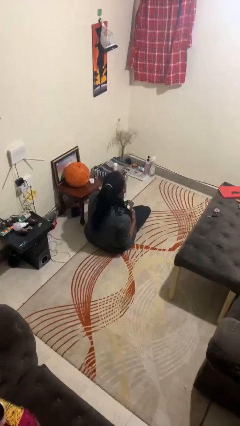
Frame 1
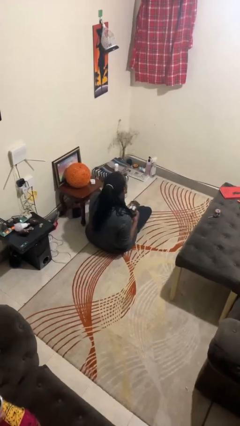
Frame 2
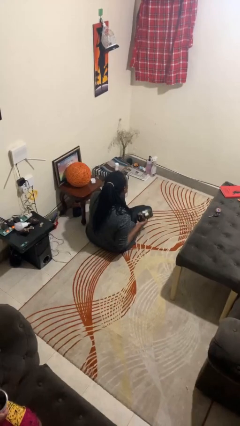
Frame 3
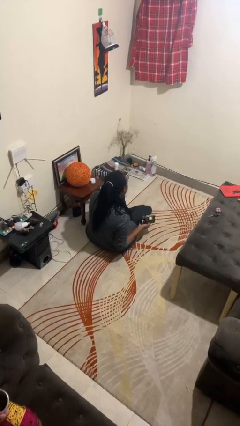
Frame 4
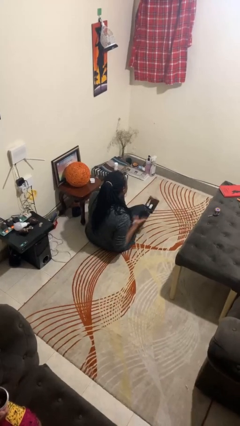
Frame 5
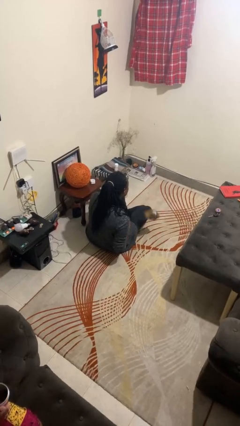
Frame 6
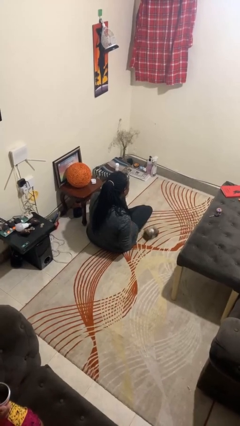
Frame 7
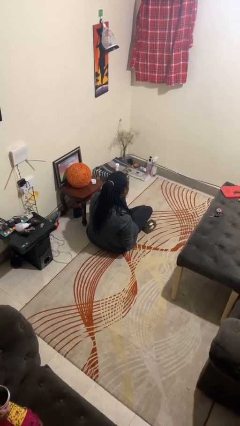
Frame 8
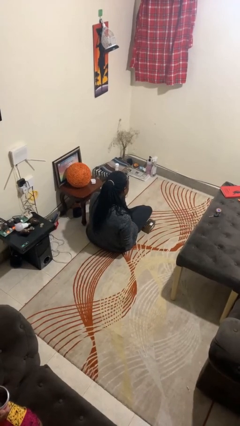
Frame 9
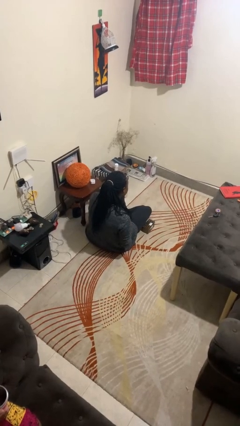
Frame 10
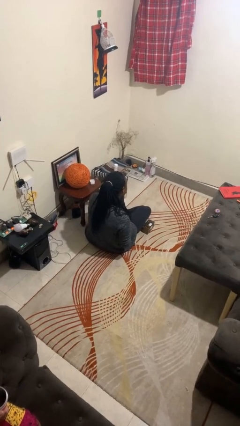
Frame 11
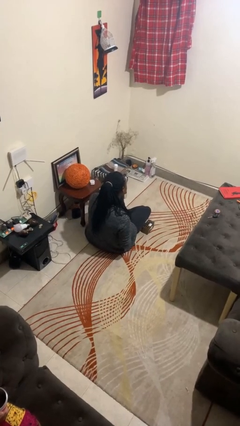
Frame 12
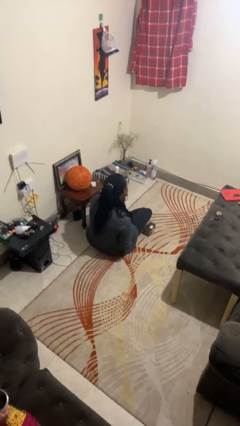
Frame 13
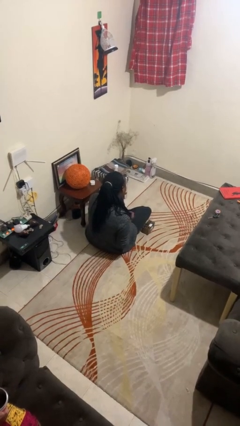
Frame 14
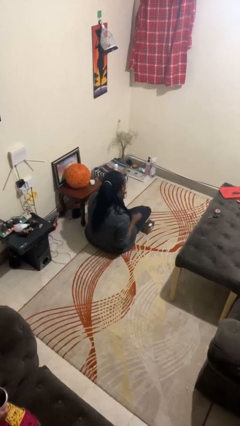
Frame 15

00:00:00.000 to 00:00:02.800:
person throws object into air

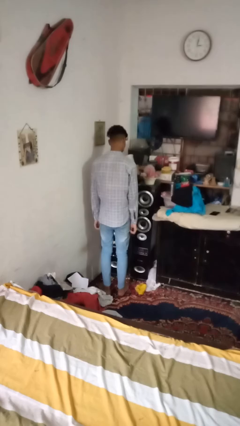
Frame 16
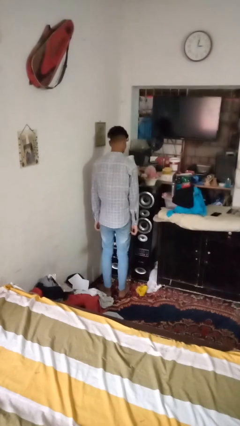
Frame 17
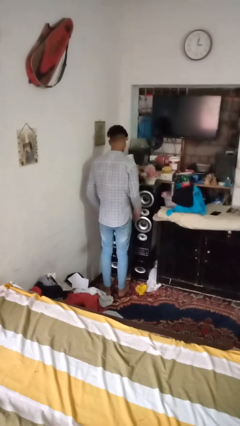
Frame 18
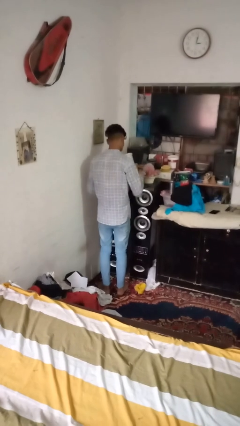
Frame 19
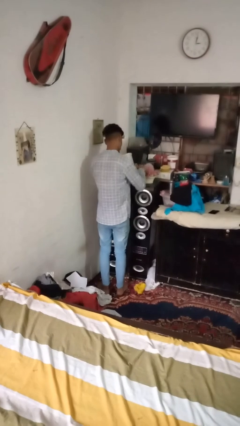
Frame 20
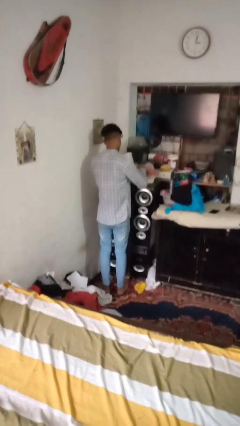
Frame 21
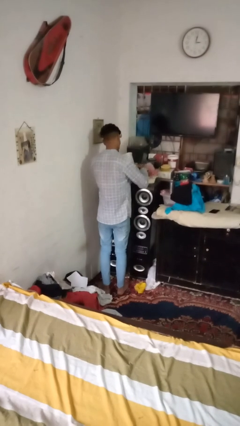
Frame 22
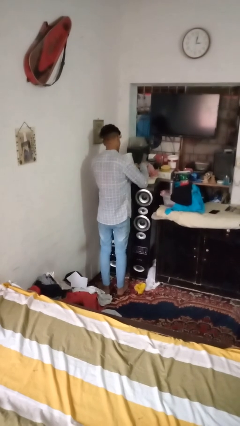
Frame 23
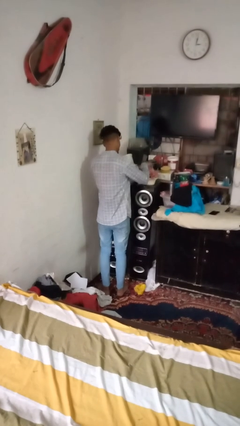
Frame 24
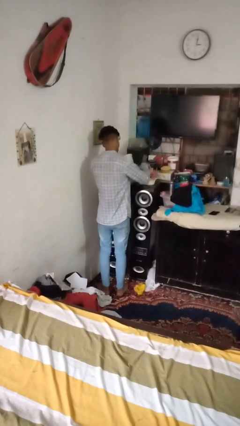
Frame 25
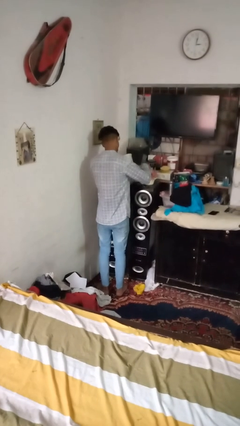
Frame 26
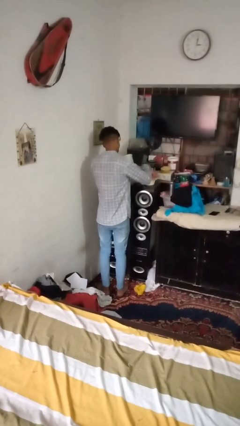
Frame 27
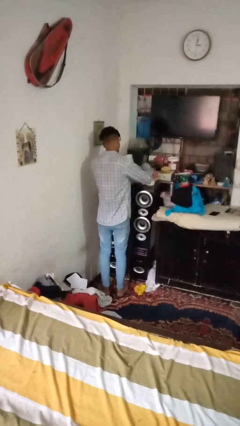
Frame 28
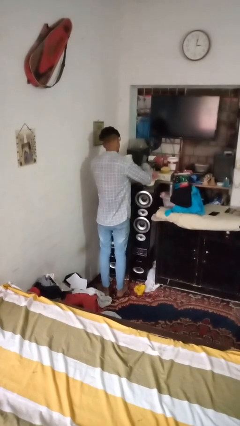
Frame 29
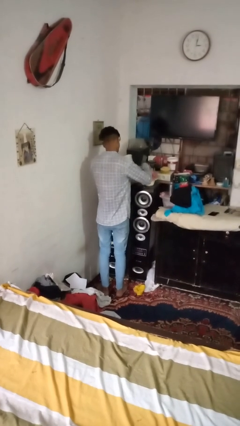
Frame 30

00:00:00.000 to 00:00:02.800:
person arranges flowers in vase

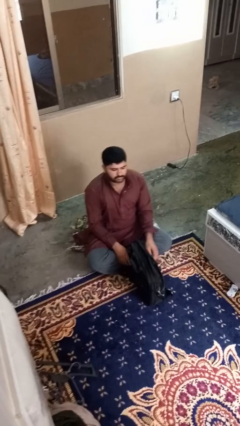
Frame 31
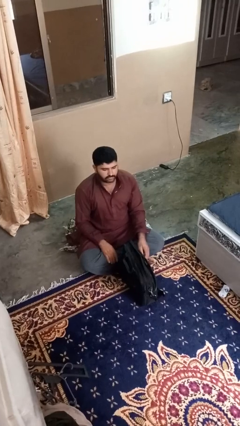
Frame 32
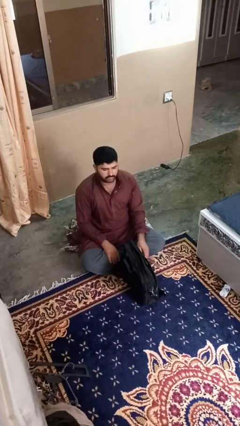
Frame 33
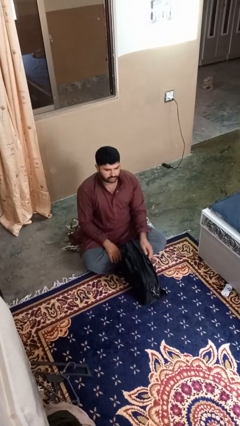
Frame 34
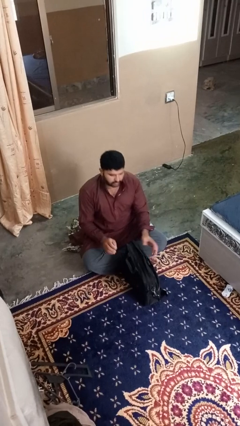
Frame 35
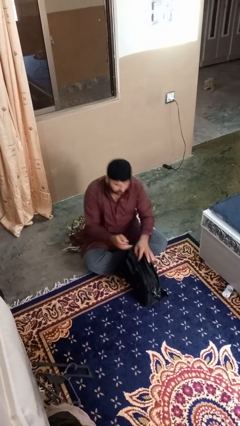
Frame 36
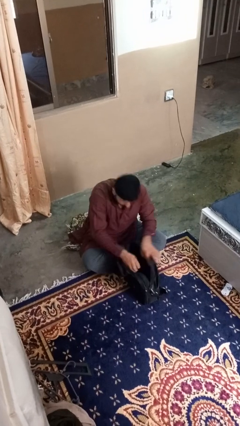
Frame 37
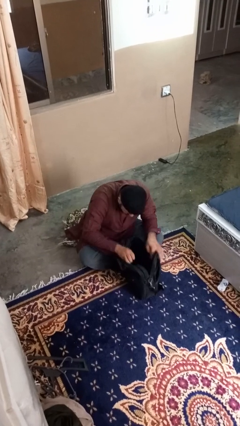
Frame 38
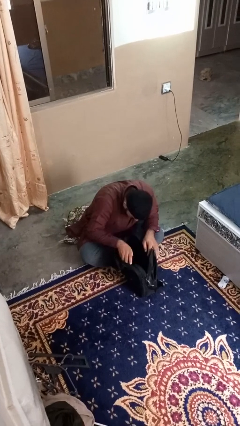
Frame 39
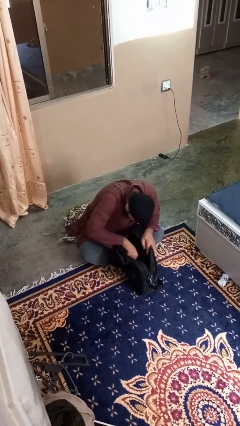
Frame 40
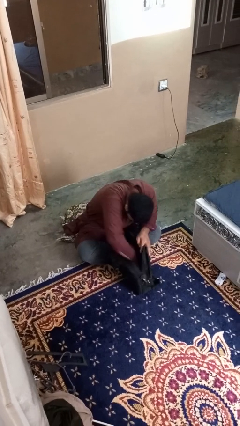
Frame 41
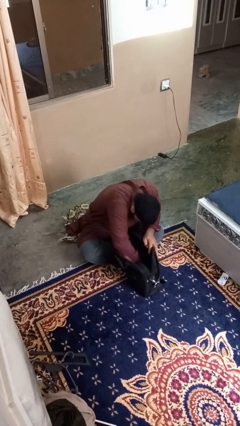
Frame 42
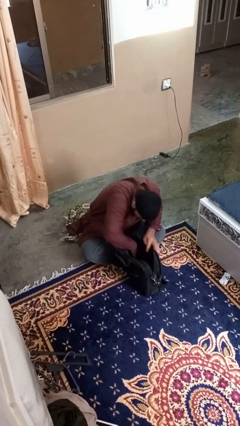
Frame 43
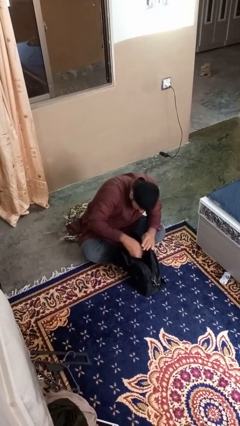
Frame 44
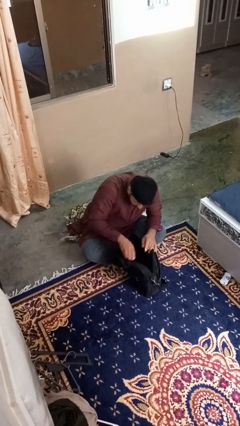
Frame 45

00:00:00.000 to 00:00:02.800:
person searches in bag

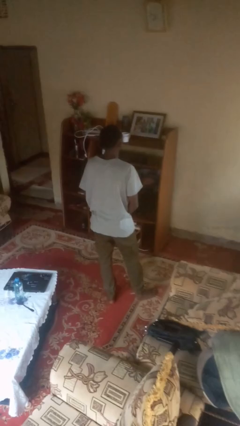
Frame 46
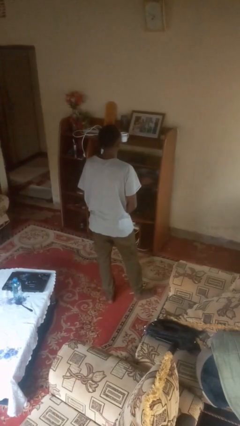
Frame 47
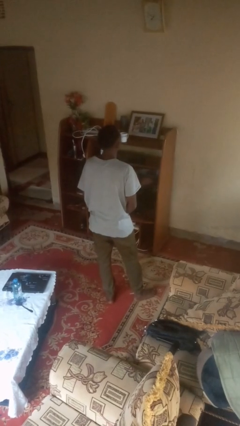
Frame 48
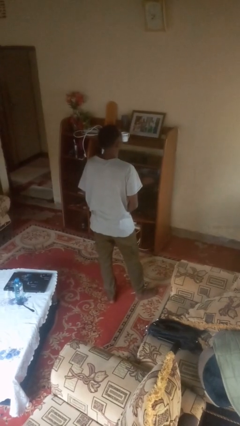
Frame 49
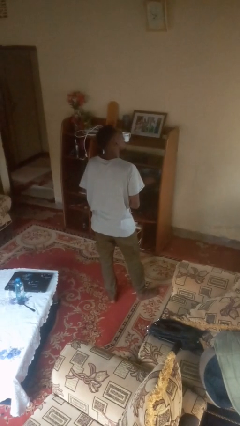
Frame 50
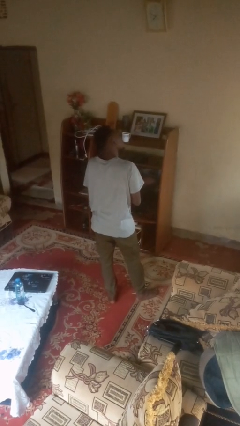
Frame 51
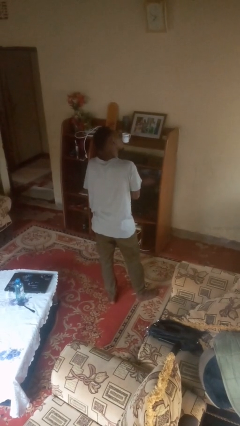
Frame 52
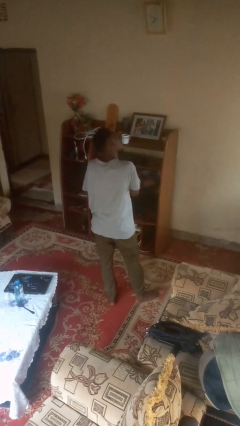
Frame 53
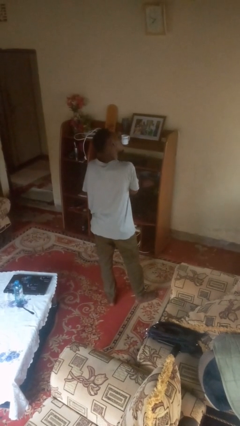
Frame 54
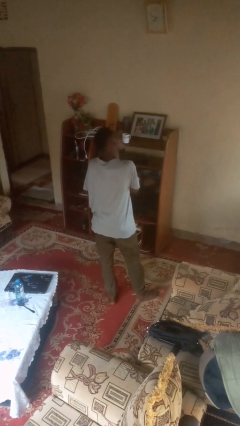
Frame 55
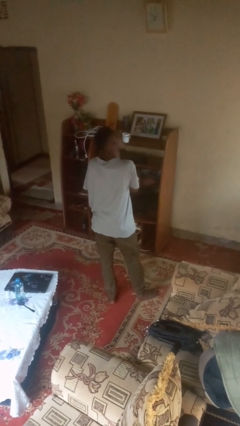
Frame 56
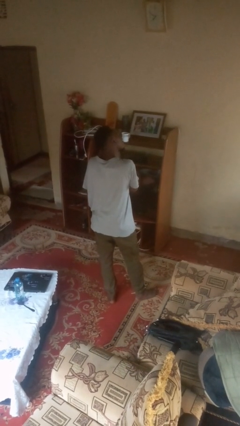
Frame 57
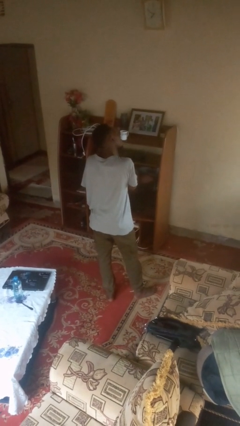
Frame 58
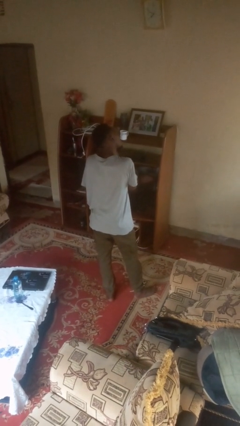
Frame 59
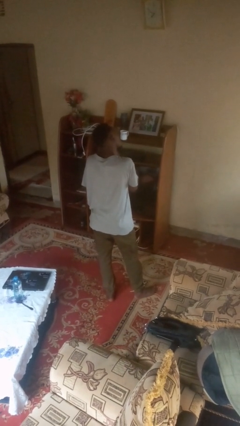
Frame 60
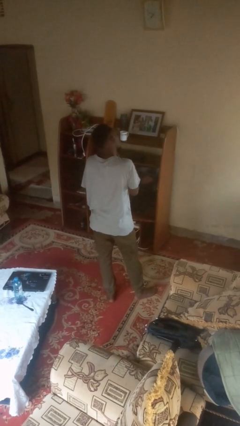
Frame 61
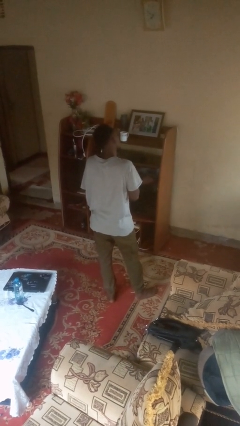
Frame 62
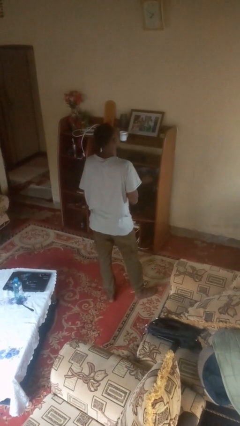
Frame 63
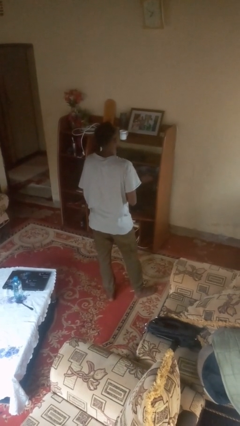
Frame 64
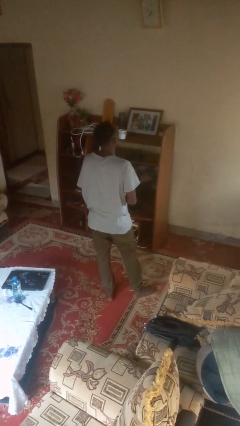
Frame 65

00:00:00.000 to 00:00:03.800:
person takes off earrings

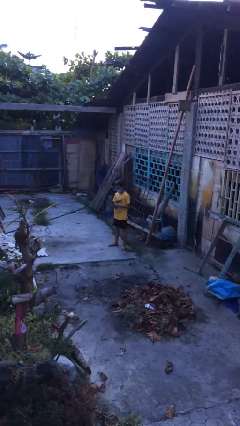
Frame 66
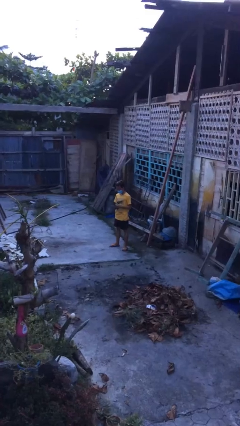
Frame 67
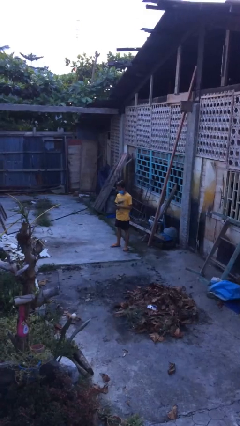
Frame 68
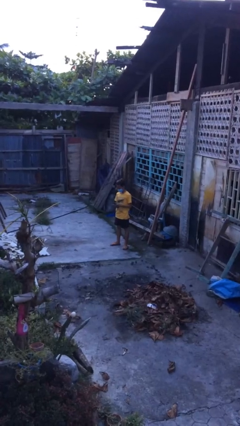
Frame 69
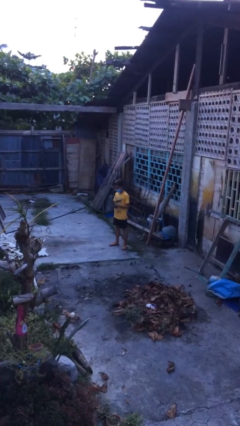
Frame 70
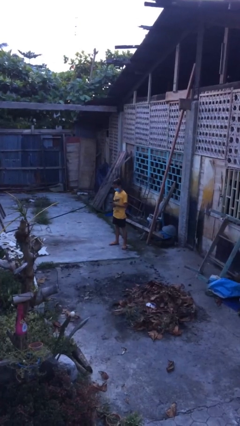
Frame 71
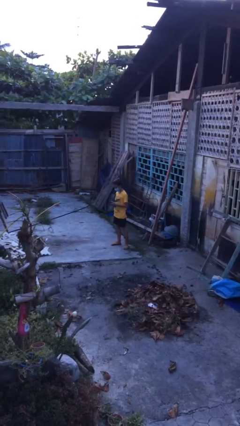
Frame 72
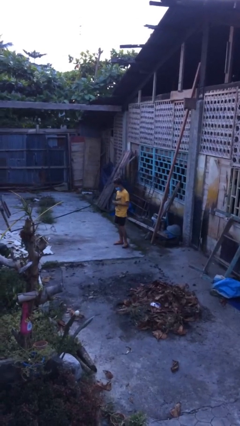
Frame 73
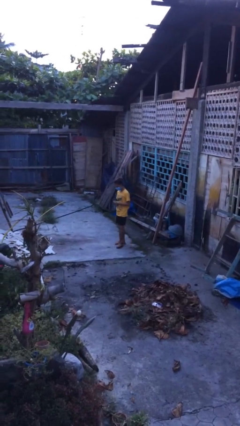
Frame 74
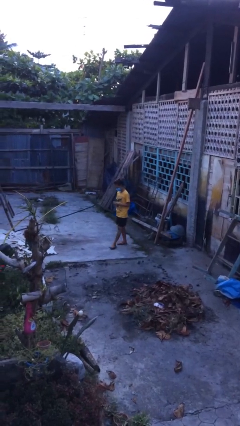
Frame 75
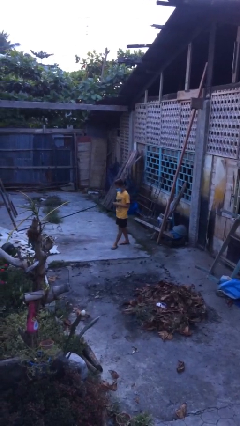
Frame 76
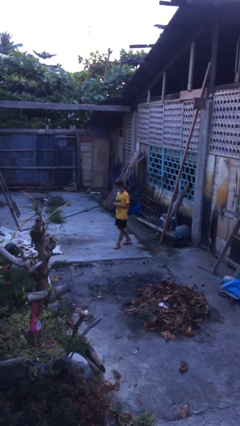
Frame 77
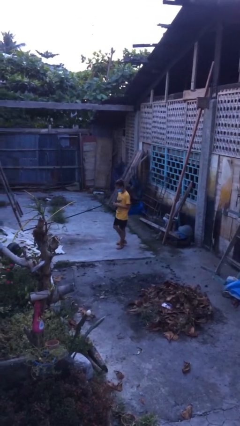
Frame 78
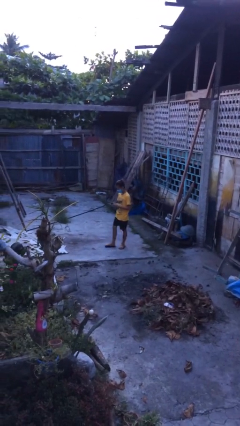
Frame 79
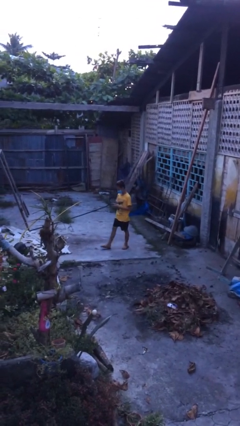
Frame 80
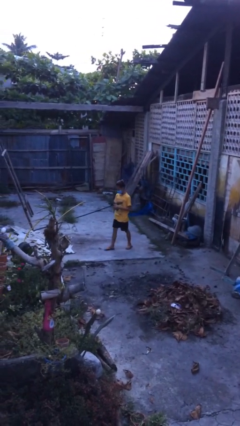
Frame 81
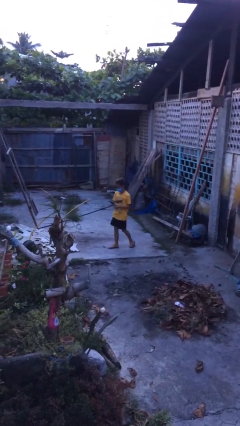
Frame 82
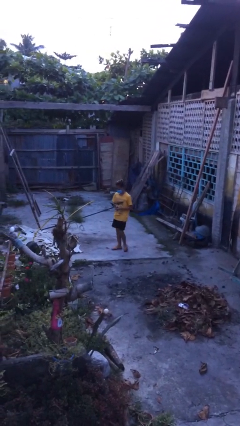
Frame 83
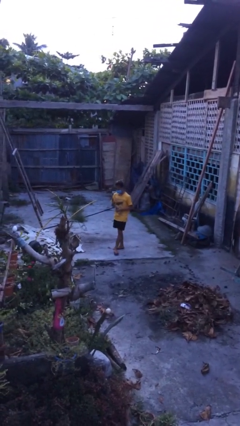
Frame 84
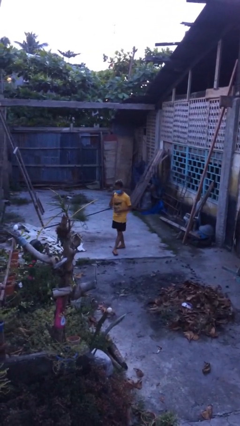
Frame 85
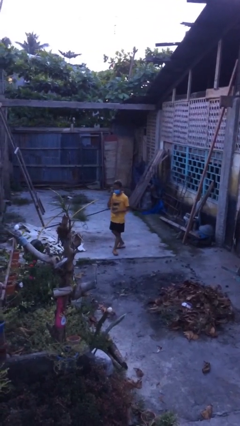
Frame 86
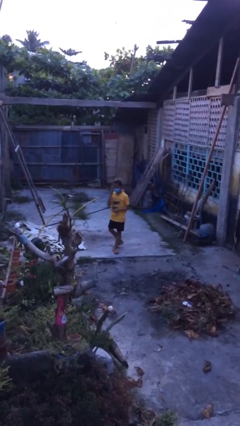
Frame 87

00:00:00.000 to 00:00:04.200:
person texts on phone

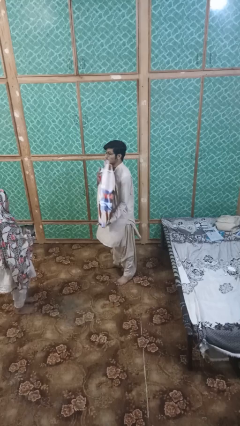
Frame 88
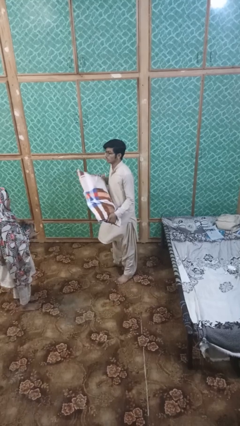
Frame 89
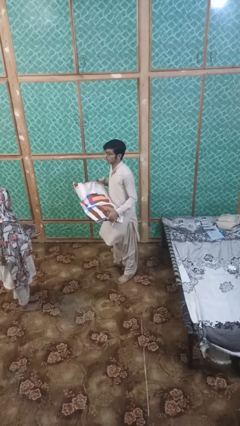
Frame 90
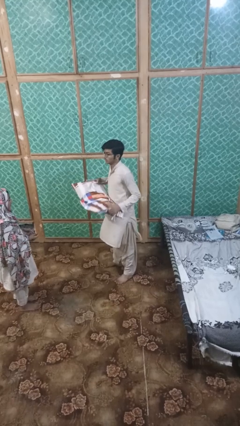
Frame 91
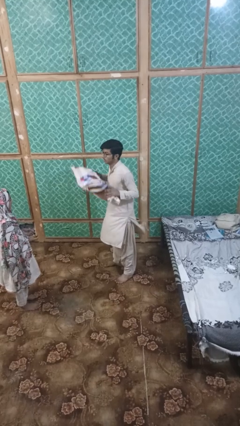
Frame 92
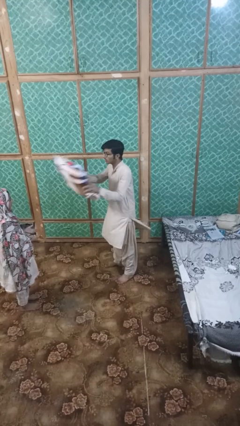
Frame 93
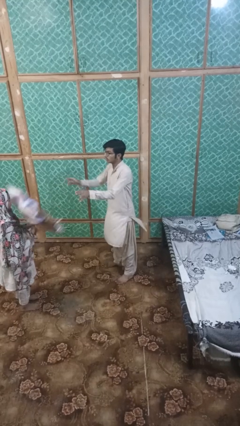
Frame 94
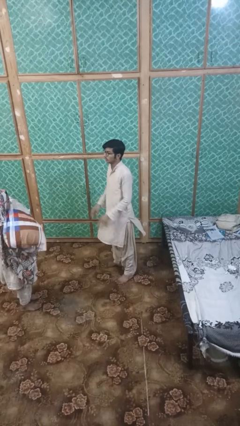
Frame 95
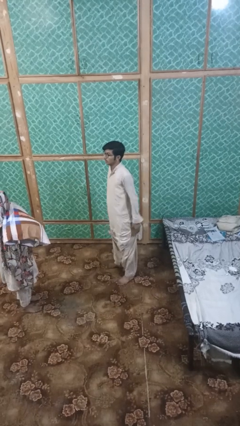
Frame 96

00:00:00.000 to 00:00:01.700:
person throws object to person
